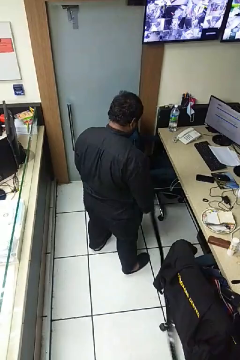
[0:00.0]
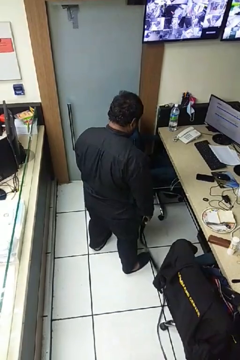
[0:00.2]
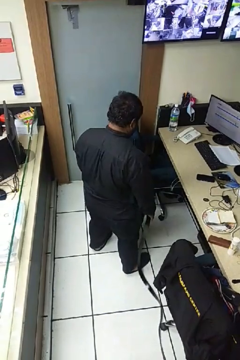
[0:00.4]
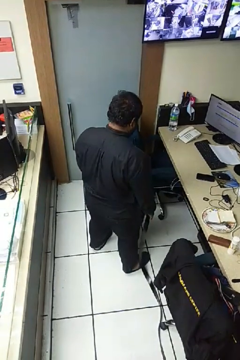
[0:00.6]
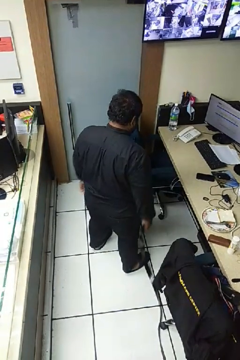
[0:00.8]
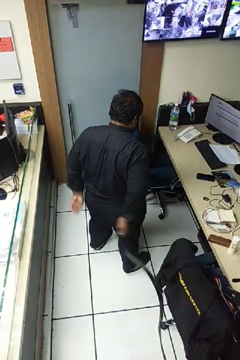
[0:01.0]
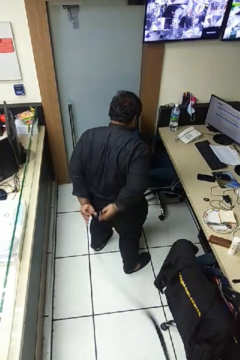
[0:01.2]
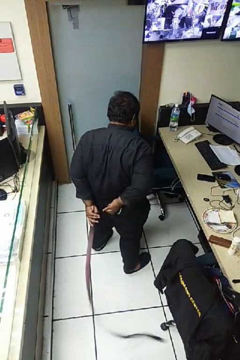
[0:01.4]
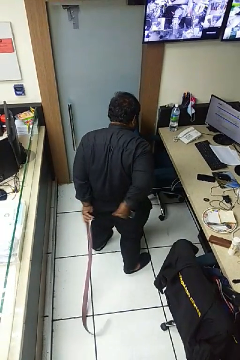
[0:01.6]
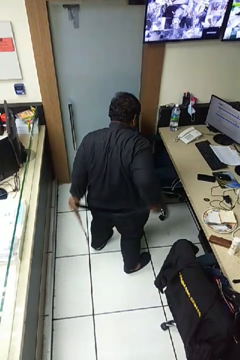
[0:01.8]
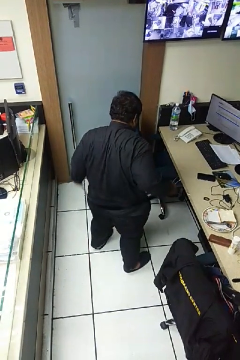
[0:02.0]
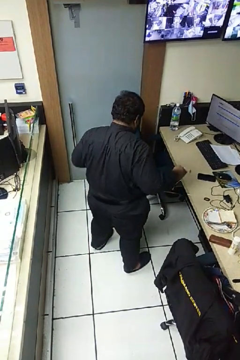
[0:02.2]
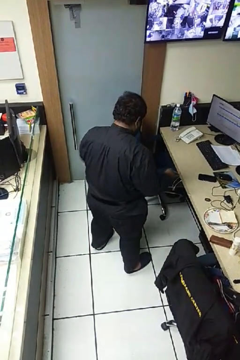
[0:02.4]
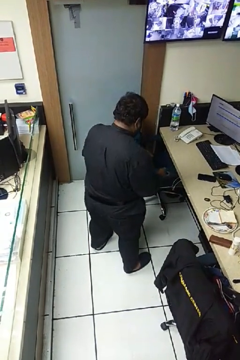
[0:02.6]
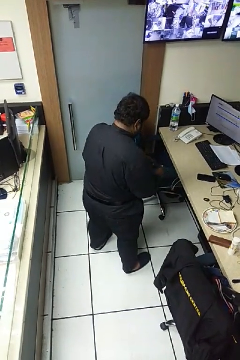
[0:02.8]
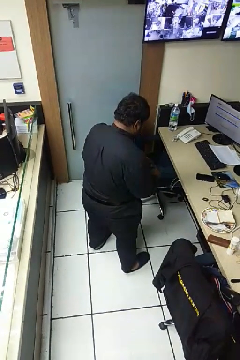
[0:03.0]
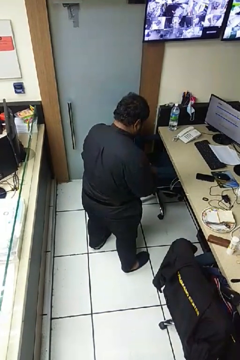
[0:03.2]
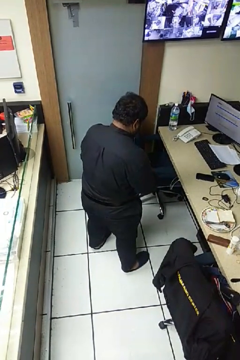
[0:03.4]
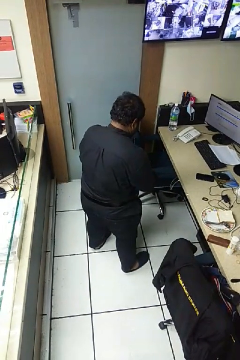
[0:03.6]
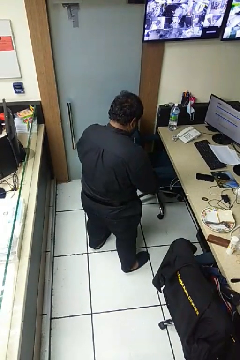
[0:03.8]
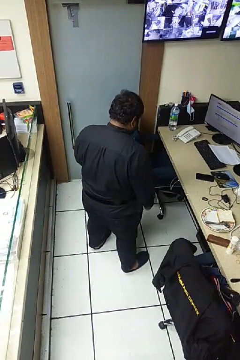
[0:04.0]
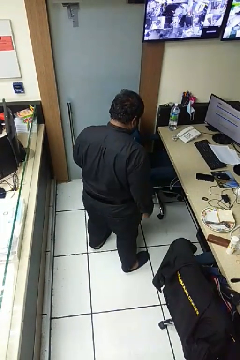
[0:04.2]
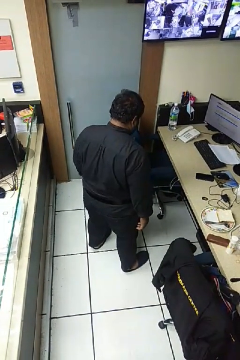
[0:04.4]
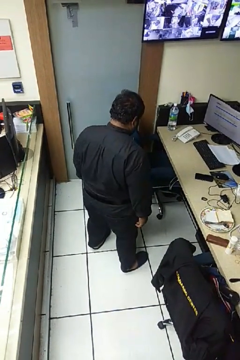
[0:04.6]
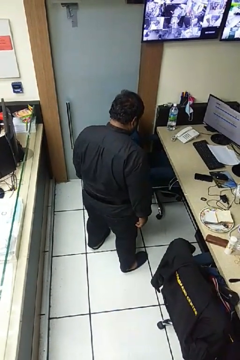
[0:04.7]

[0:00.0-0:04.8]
person puts on belt

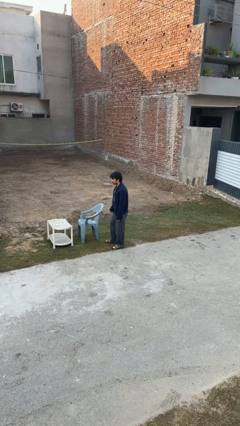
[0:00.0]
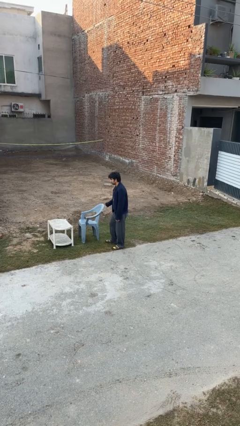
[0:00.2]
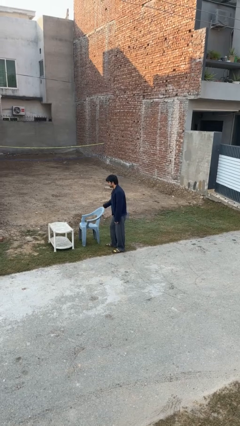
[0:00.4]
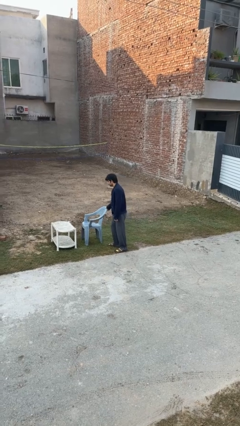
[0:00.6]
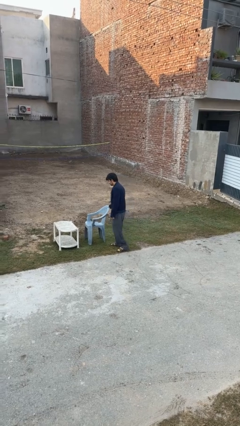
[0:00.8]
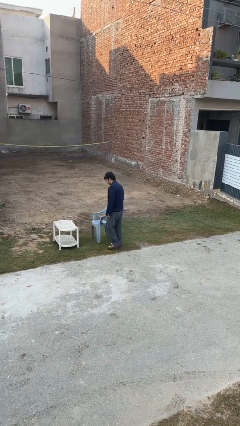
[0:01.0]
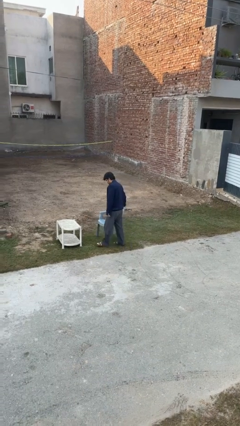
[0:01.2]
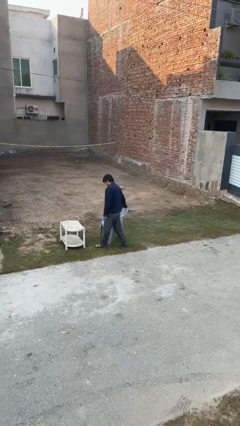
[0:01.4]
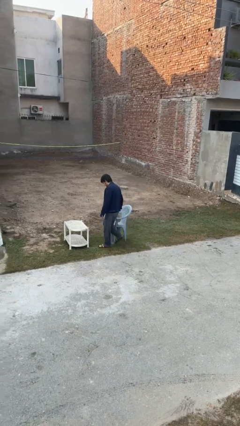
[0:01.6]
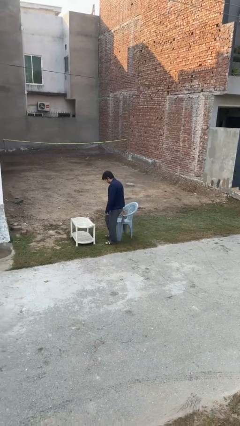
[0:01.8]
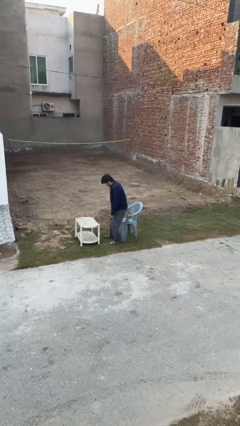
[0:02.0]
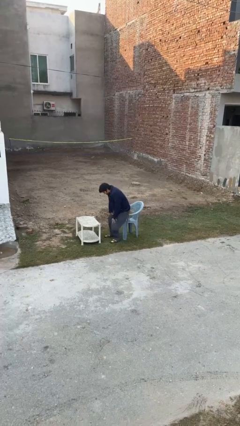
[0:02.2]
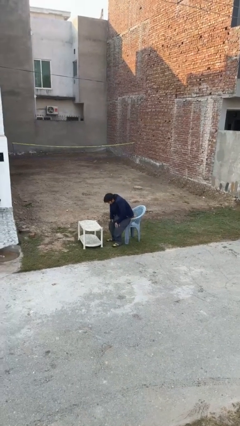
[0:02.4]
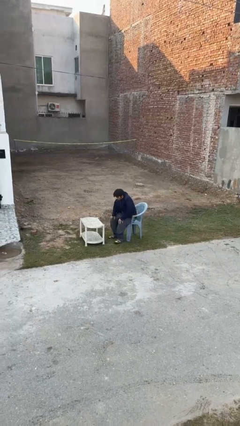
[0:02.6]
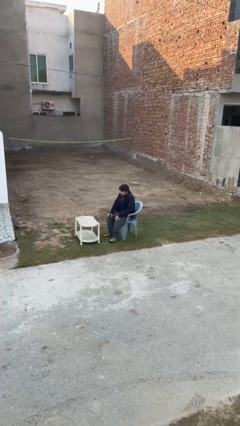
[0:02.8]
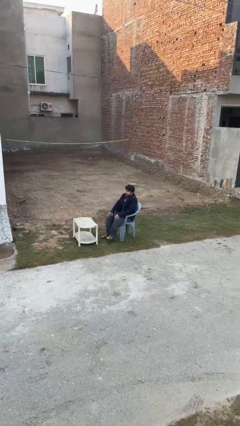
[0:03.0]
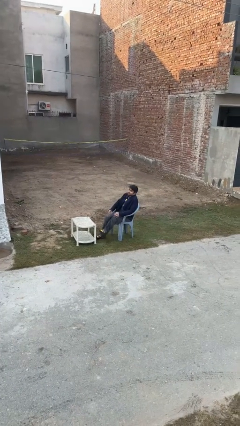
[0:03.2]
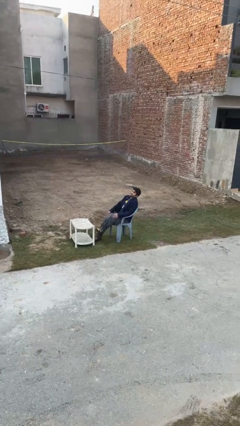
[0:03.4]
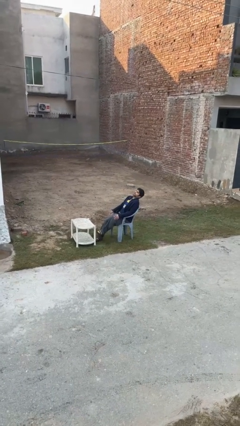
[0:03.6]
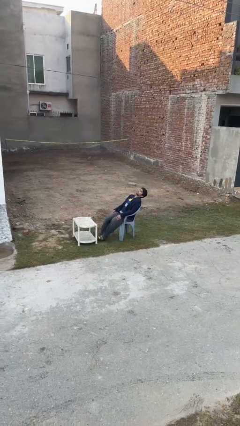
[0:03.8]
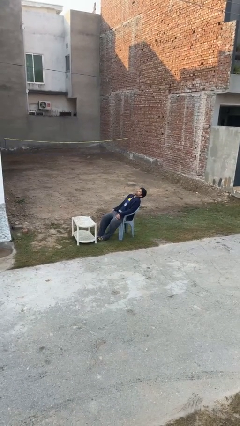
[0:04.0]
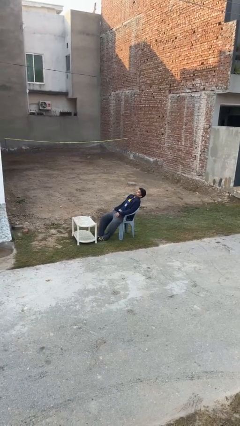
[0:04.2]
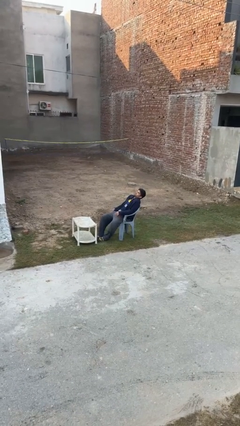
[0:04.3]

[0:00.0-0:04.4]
person sits down

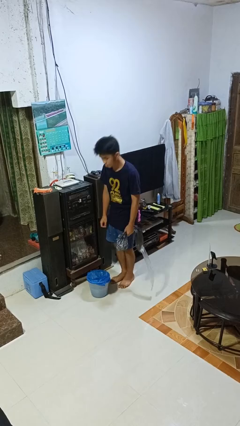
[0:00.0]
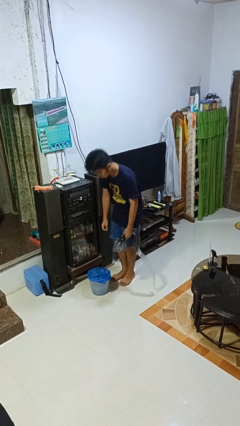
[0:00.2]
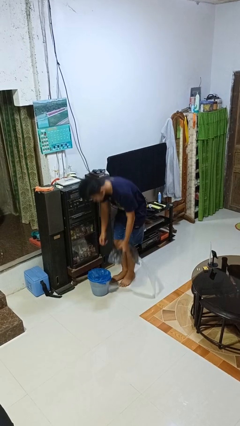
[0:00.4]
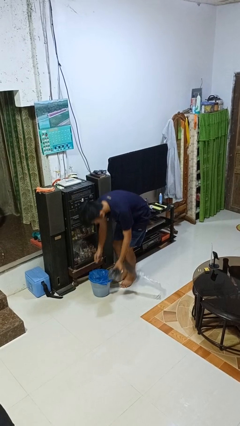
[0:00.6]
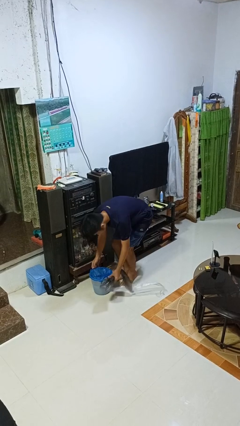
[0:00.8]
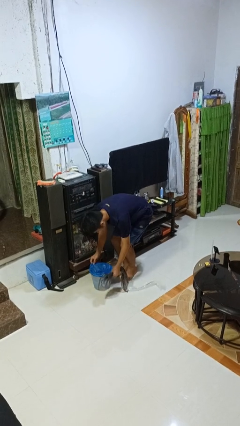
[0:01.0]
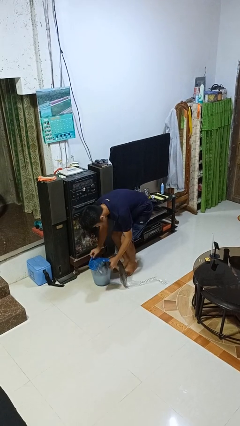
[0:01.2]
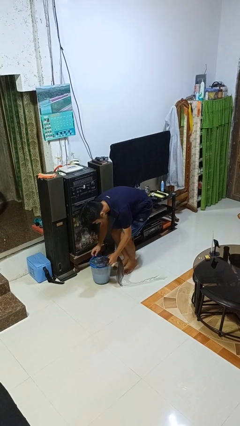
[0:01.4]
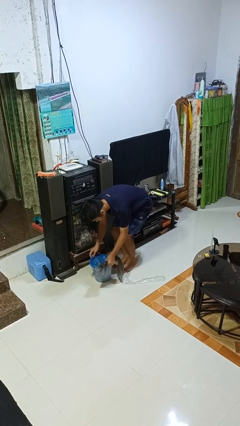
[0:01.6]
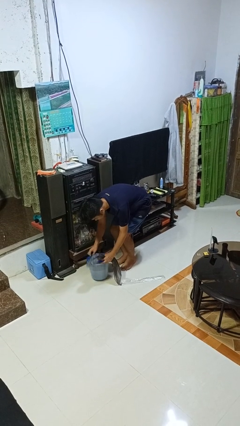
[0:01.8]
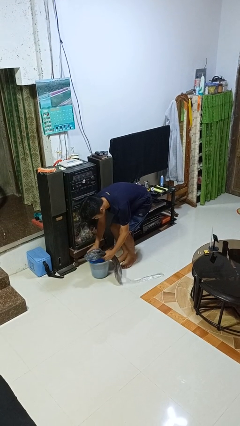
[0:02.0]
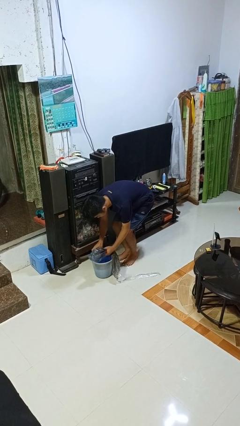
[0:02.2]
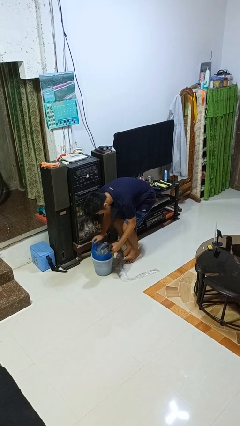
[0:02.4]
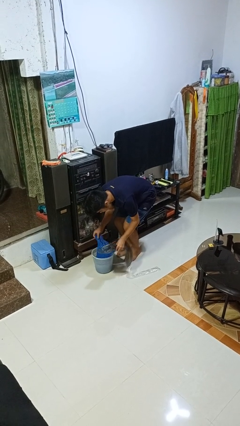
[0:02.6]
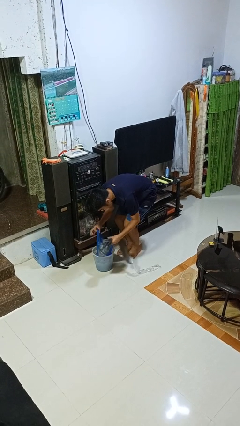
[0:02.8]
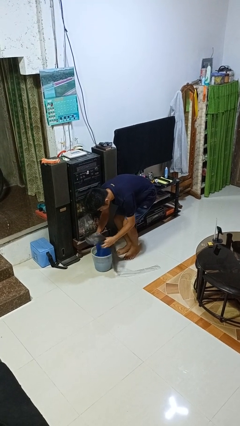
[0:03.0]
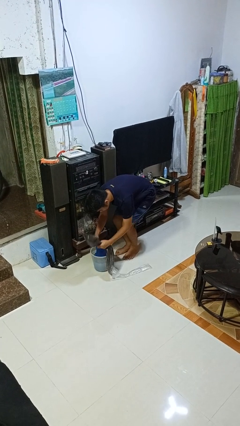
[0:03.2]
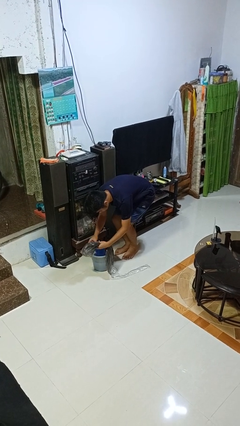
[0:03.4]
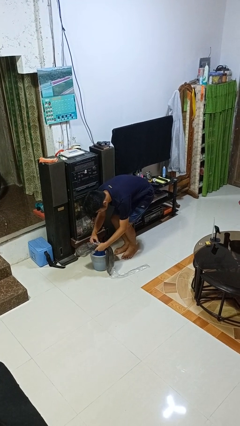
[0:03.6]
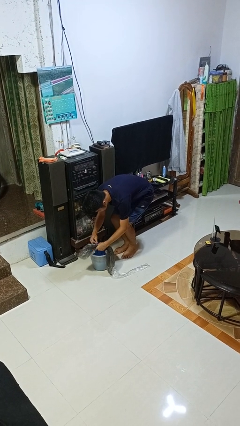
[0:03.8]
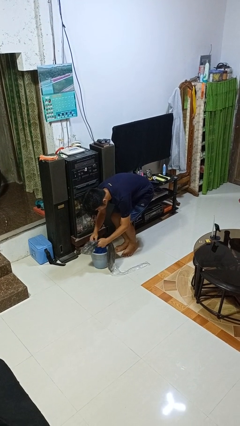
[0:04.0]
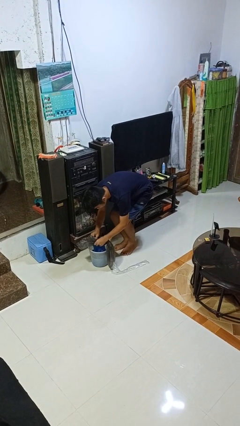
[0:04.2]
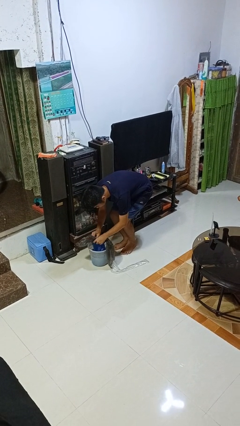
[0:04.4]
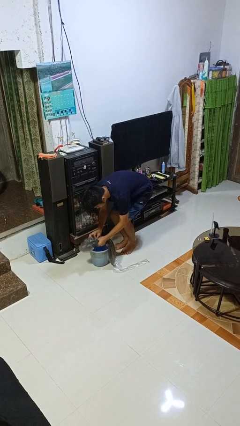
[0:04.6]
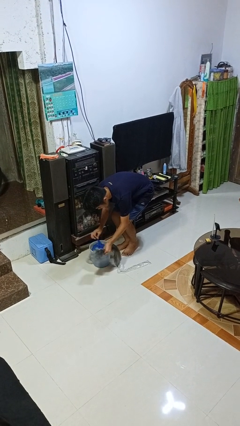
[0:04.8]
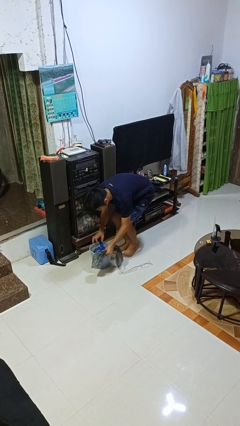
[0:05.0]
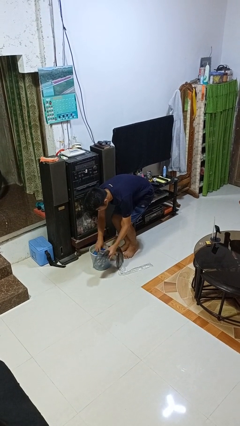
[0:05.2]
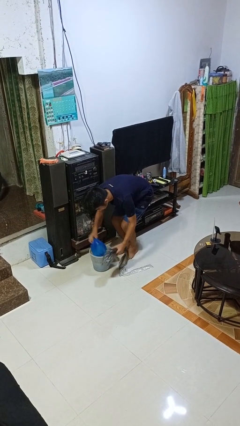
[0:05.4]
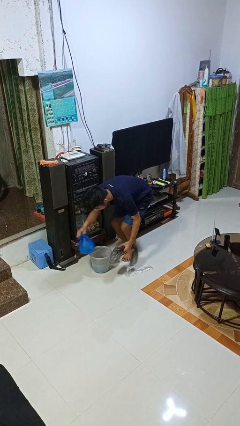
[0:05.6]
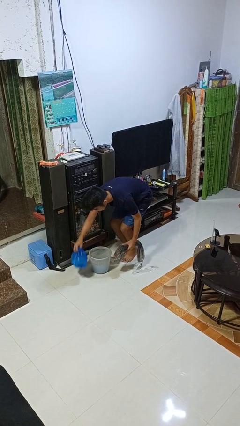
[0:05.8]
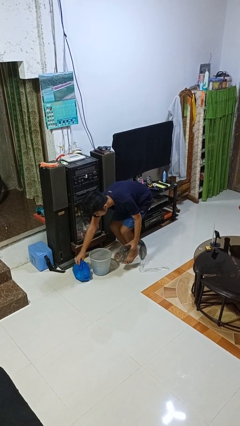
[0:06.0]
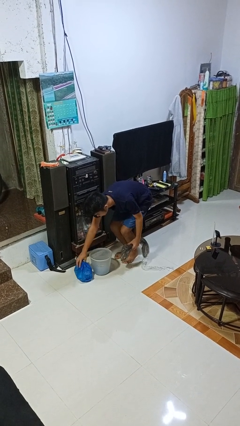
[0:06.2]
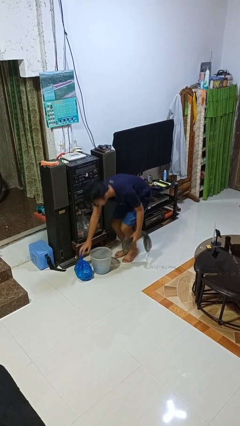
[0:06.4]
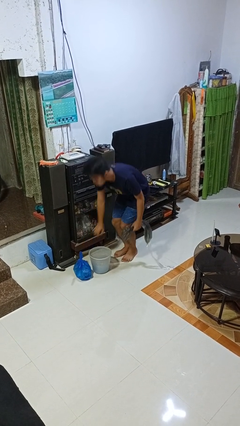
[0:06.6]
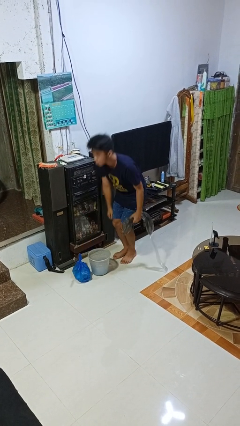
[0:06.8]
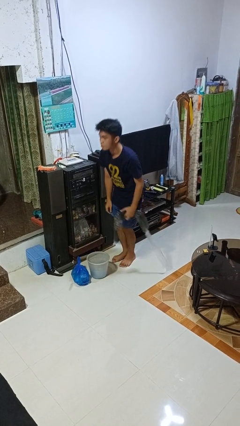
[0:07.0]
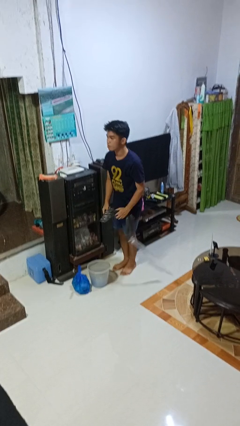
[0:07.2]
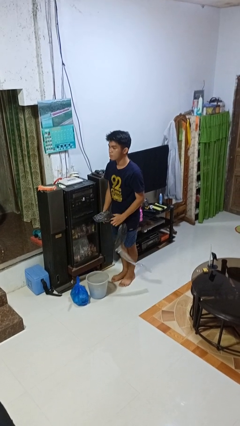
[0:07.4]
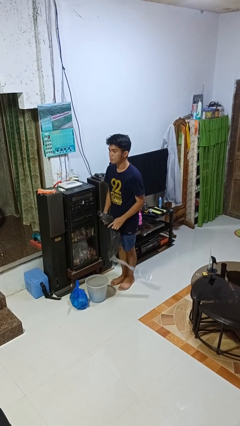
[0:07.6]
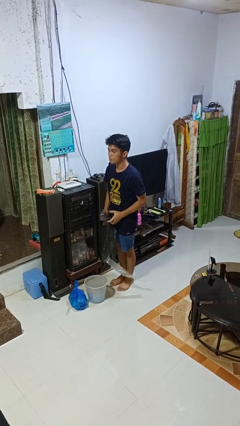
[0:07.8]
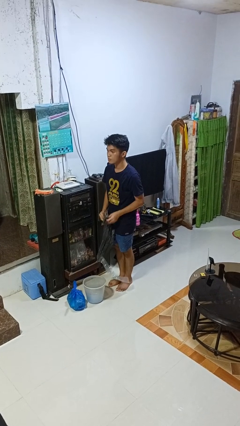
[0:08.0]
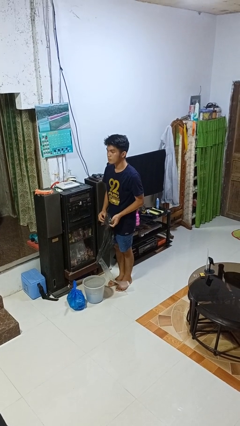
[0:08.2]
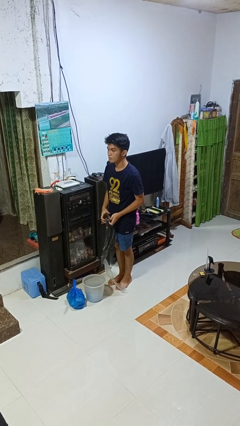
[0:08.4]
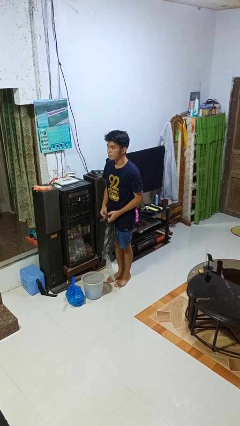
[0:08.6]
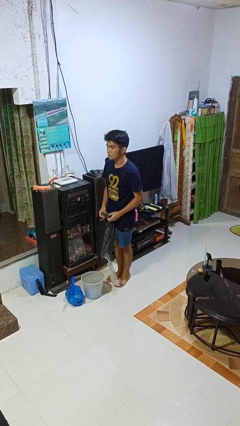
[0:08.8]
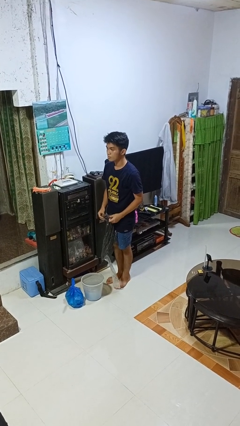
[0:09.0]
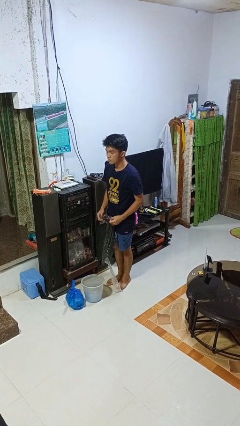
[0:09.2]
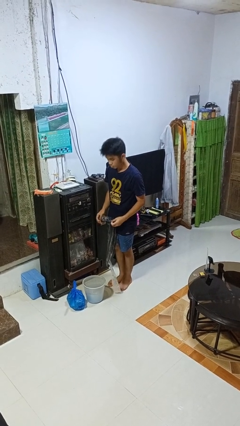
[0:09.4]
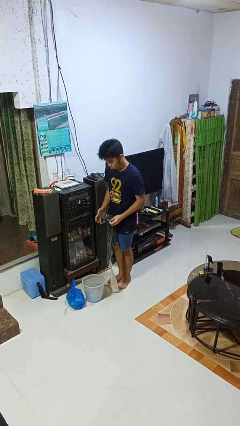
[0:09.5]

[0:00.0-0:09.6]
person removes trashbag from trashcan
